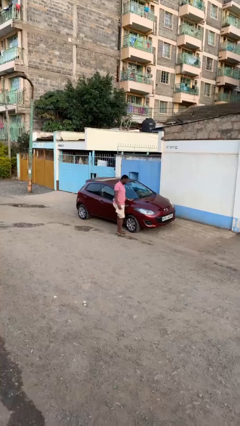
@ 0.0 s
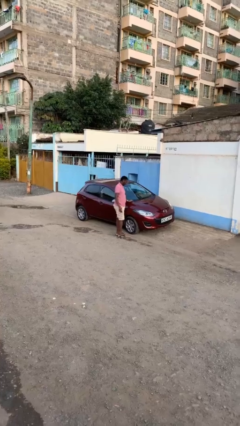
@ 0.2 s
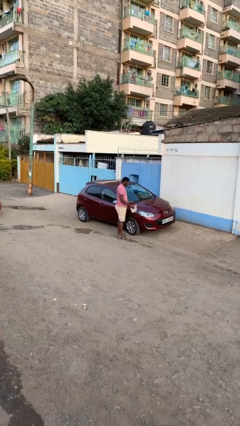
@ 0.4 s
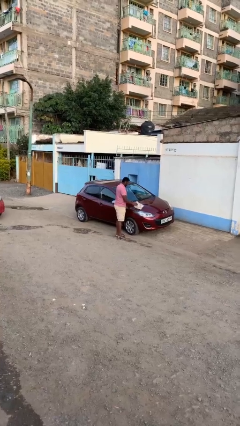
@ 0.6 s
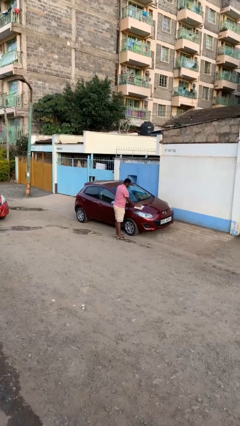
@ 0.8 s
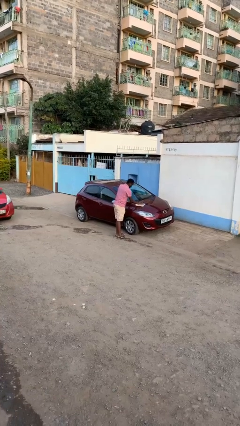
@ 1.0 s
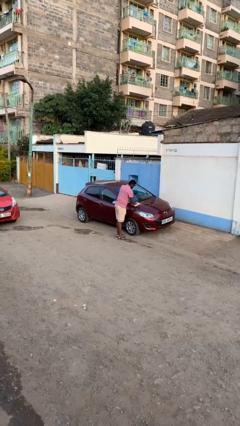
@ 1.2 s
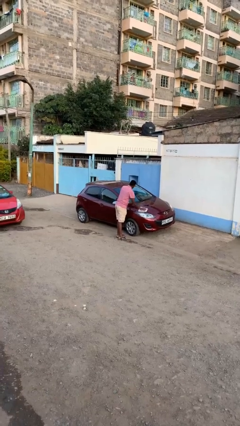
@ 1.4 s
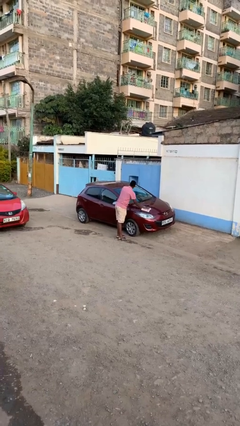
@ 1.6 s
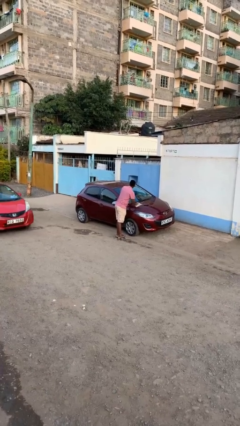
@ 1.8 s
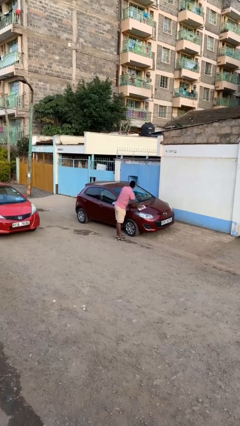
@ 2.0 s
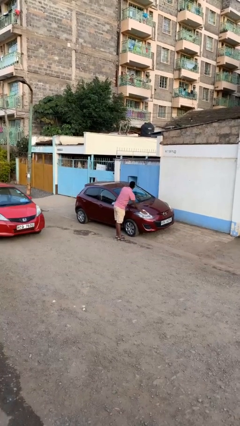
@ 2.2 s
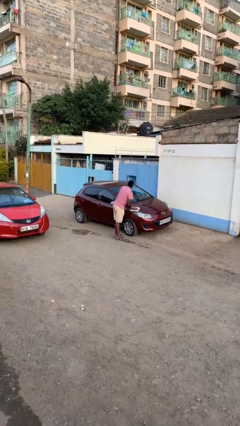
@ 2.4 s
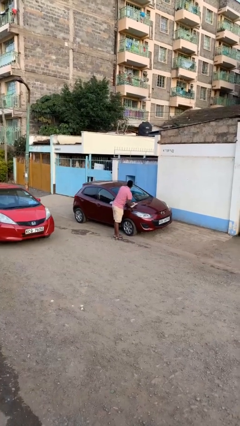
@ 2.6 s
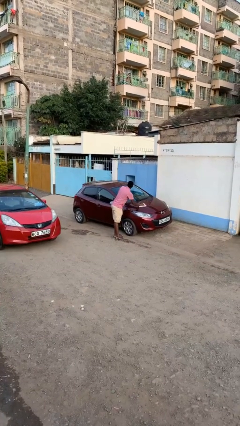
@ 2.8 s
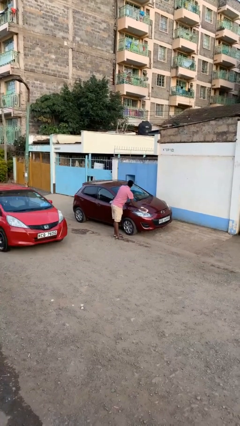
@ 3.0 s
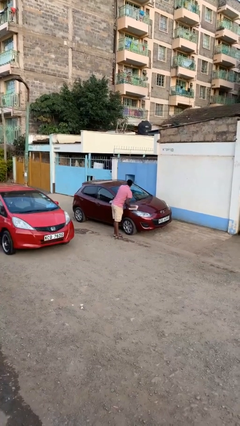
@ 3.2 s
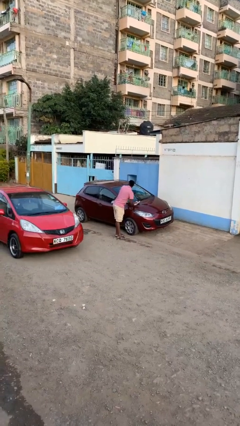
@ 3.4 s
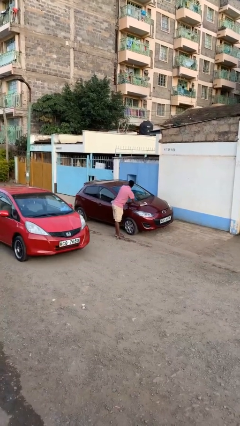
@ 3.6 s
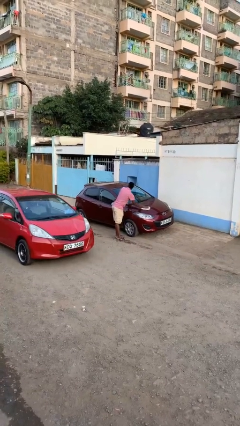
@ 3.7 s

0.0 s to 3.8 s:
person polishes car with rag

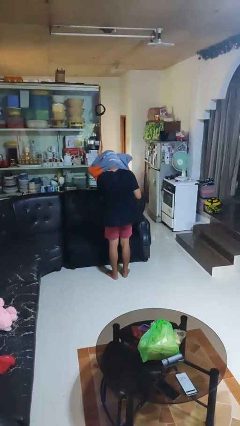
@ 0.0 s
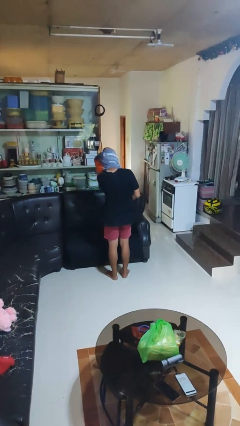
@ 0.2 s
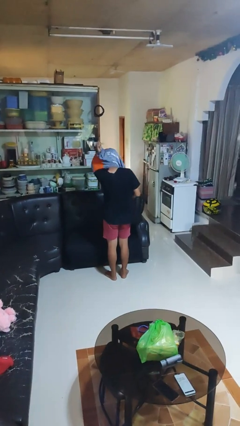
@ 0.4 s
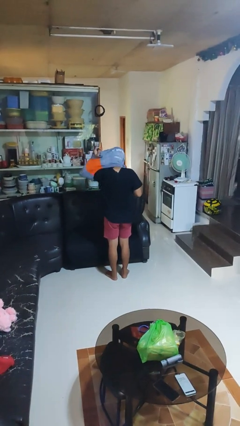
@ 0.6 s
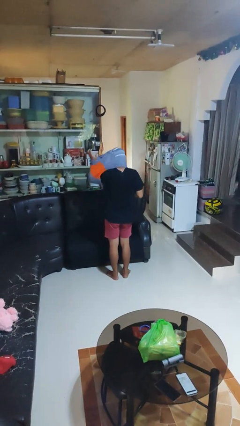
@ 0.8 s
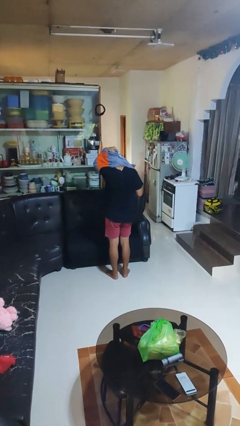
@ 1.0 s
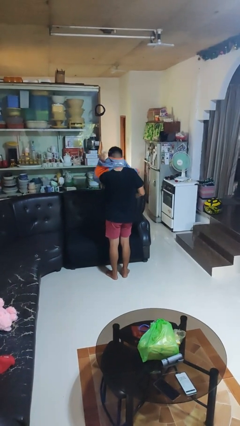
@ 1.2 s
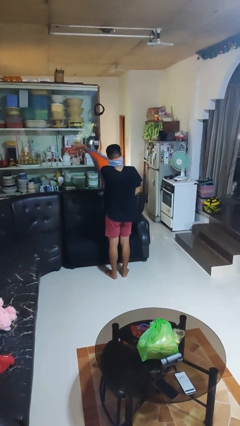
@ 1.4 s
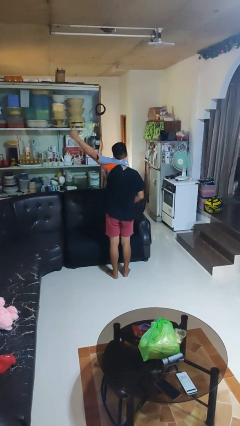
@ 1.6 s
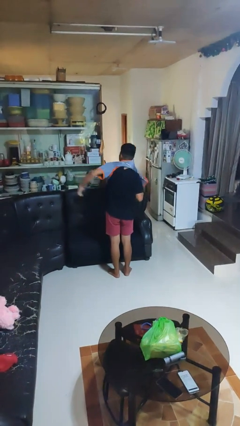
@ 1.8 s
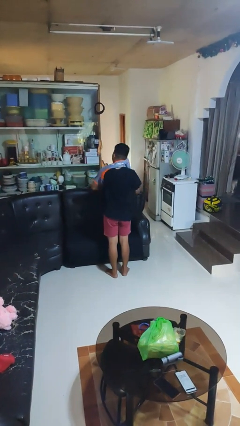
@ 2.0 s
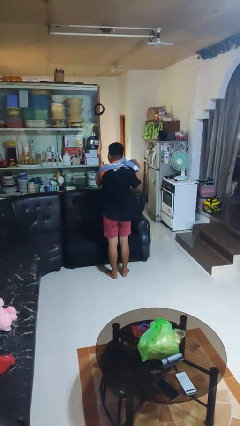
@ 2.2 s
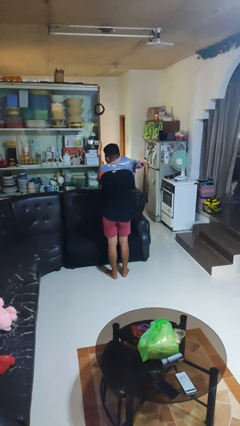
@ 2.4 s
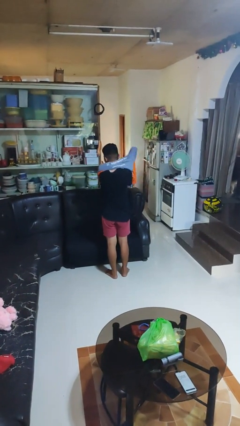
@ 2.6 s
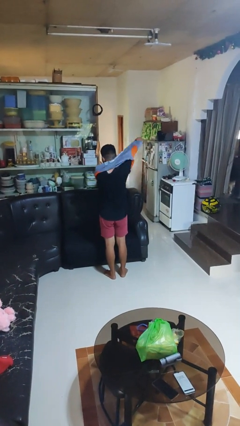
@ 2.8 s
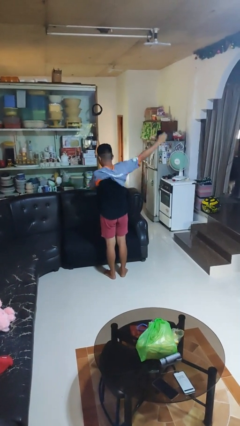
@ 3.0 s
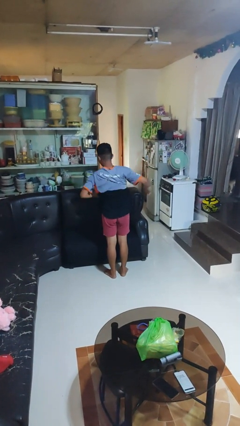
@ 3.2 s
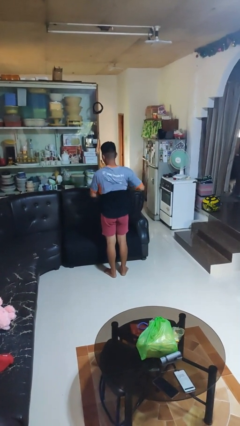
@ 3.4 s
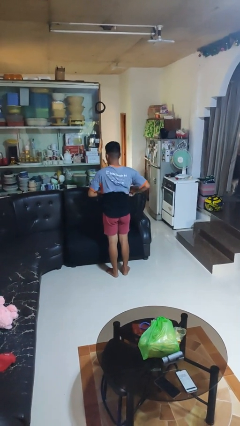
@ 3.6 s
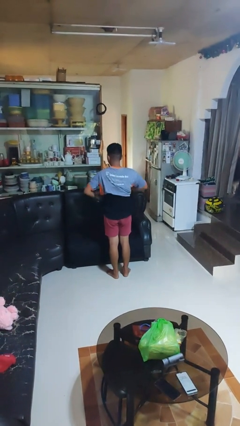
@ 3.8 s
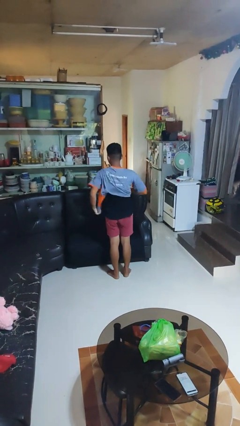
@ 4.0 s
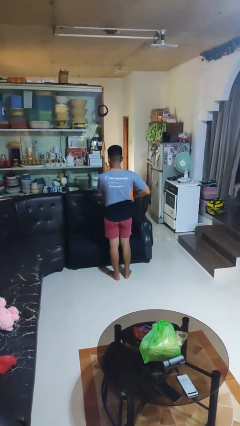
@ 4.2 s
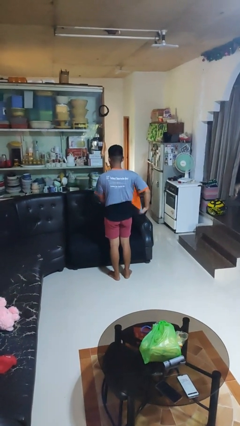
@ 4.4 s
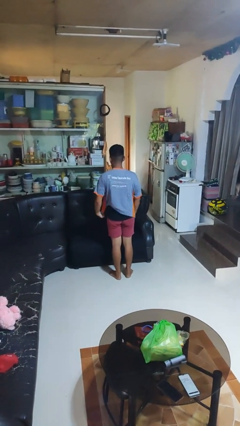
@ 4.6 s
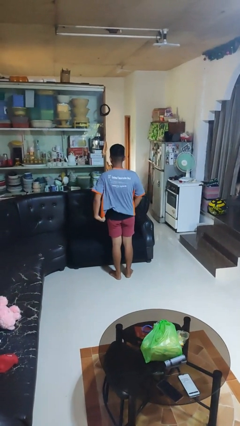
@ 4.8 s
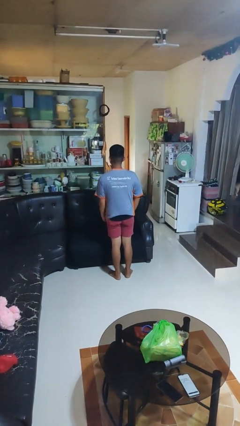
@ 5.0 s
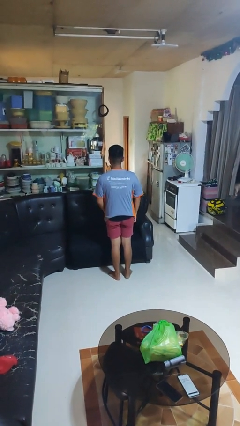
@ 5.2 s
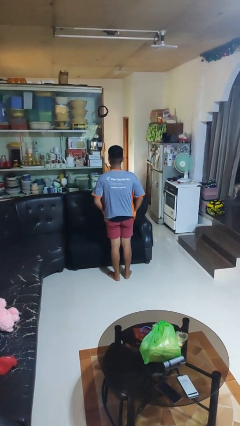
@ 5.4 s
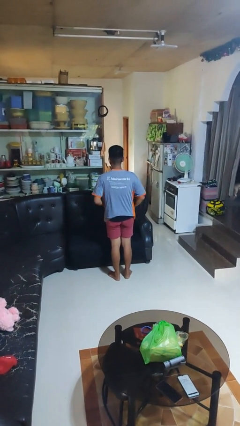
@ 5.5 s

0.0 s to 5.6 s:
person puts on shirt

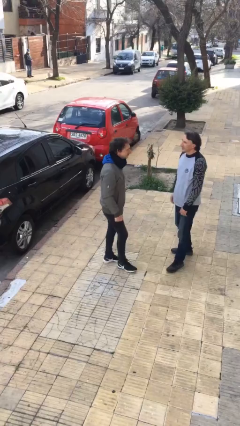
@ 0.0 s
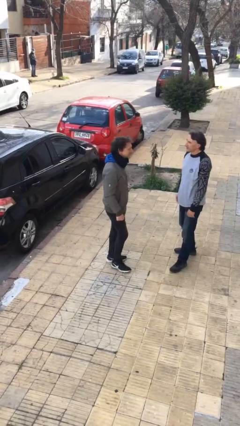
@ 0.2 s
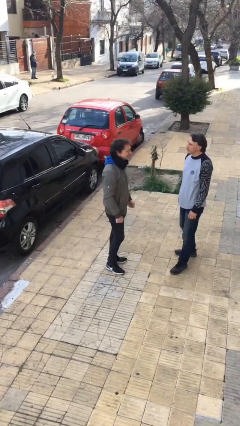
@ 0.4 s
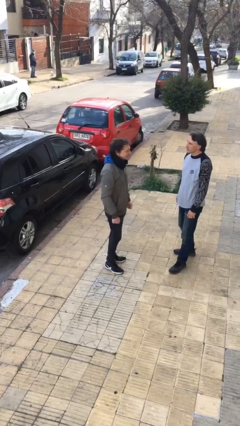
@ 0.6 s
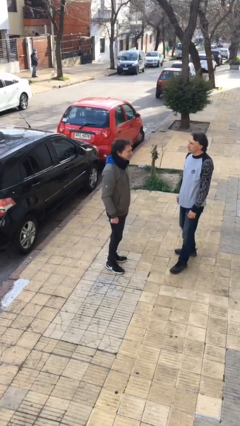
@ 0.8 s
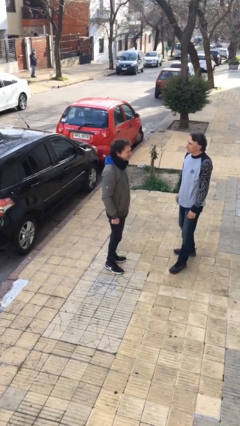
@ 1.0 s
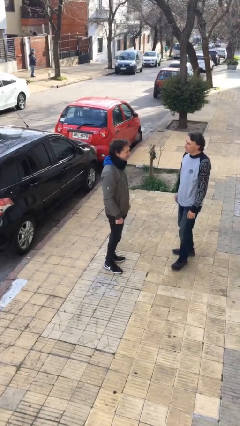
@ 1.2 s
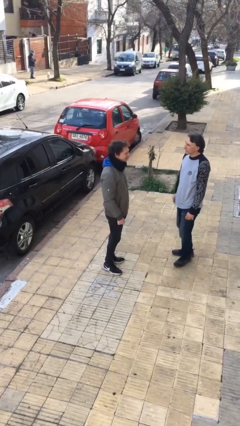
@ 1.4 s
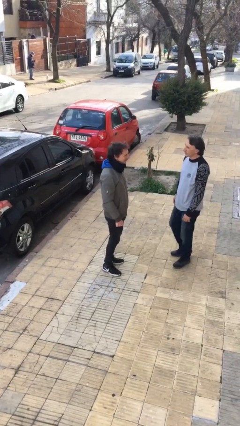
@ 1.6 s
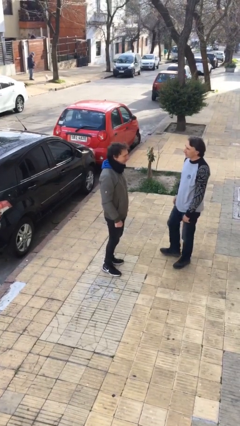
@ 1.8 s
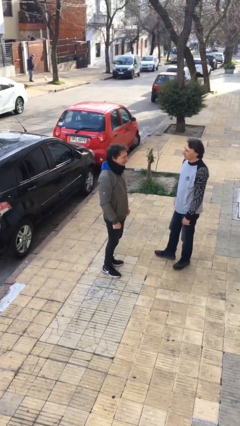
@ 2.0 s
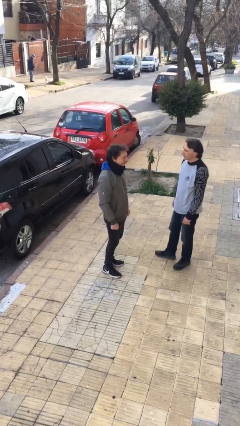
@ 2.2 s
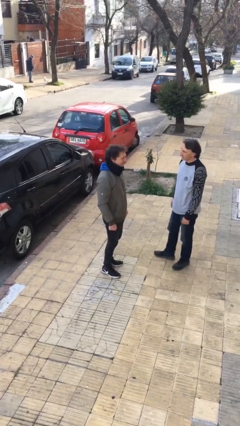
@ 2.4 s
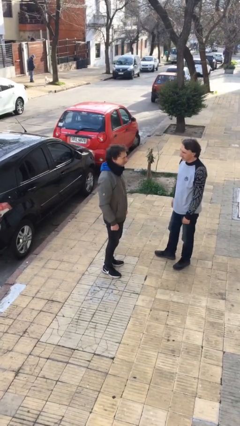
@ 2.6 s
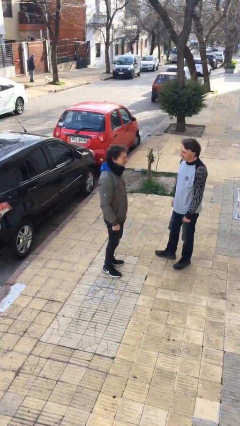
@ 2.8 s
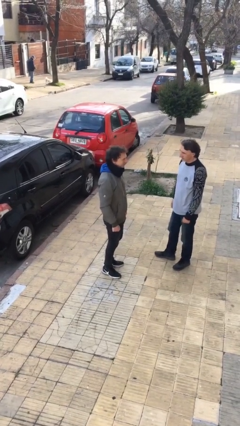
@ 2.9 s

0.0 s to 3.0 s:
person talks to person

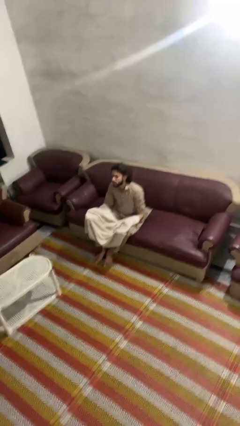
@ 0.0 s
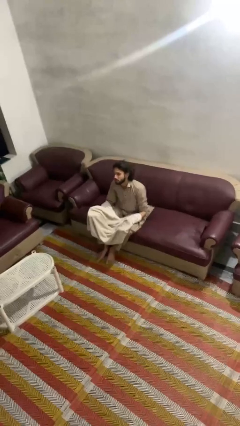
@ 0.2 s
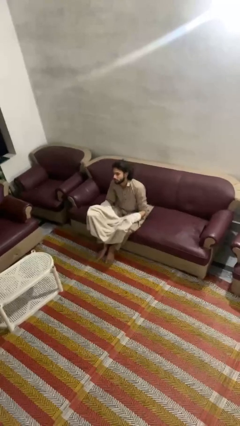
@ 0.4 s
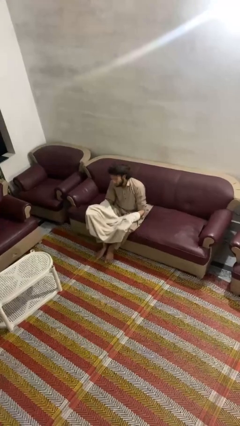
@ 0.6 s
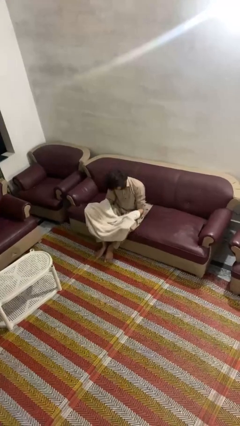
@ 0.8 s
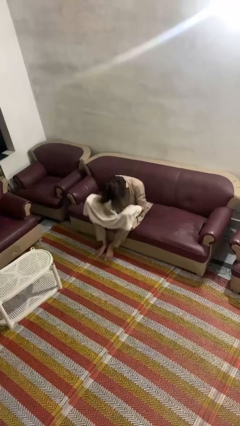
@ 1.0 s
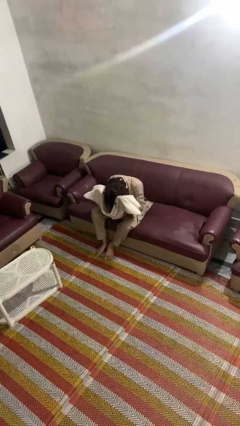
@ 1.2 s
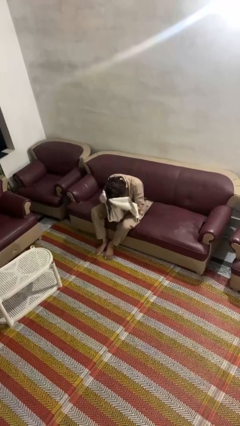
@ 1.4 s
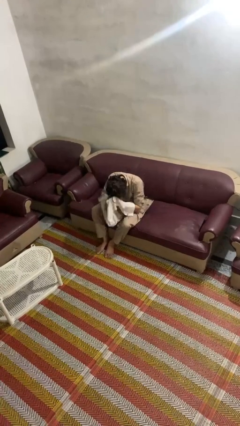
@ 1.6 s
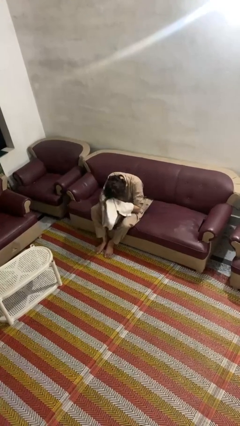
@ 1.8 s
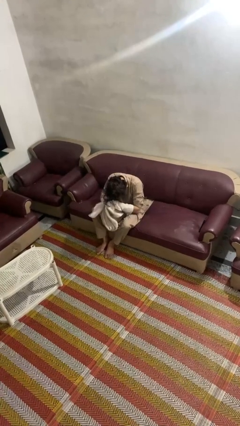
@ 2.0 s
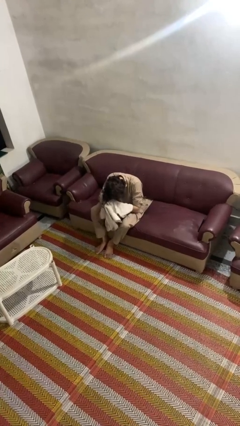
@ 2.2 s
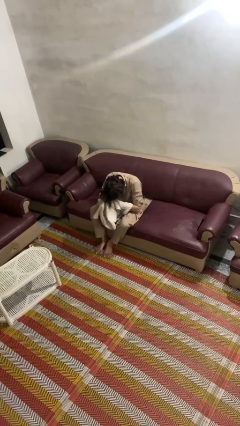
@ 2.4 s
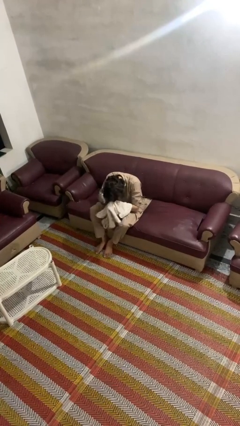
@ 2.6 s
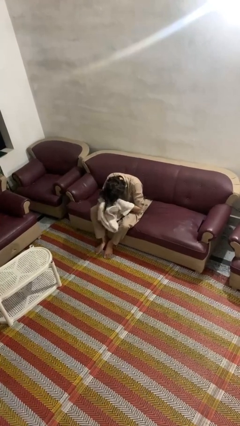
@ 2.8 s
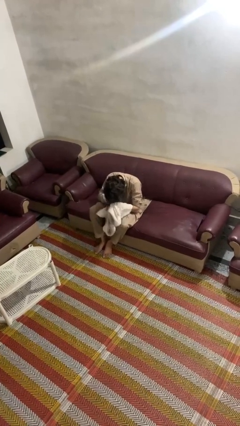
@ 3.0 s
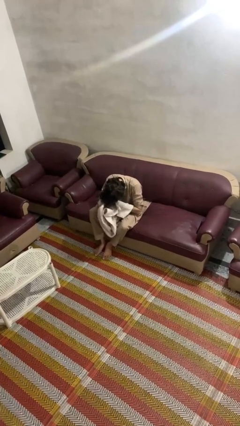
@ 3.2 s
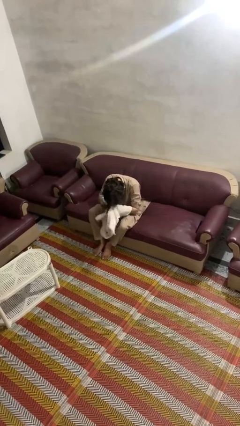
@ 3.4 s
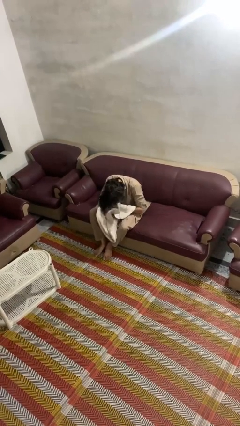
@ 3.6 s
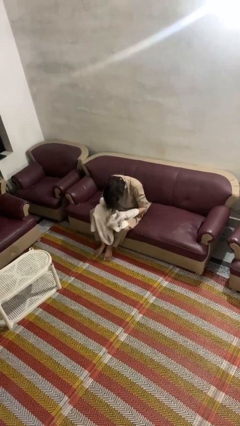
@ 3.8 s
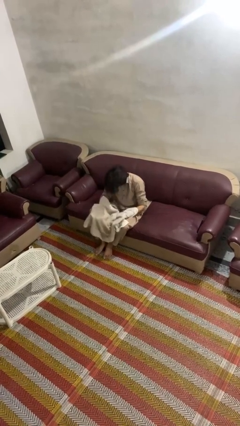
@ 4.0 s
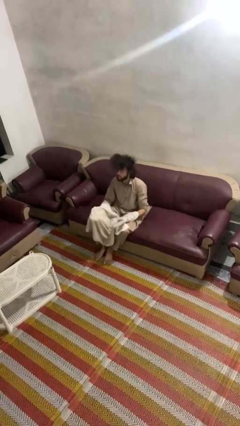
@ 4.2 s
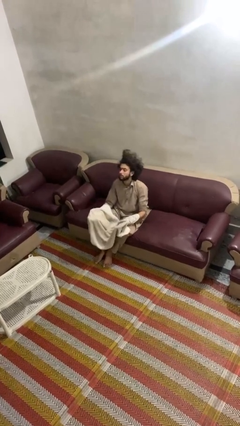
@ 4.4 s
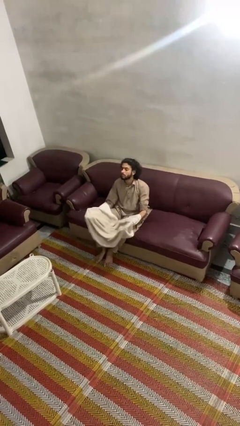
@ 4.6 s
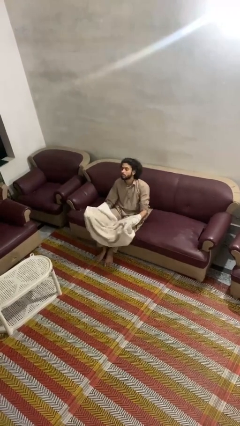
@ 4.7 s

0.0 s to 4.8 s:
person dries hair with towel

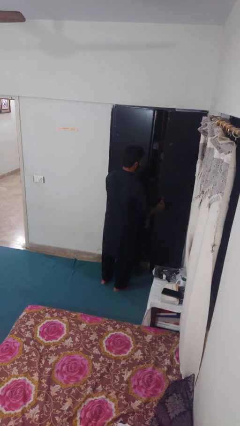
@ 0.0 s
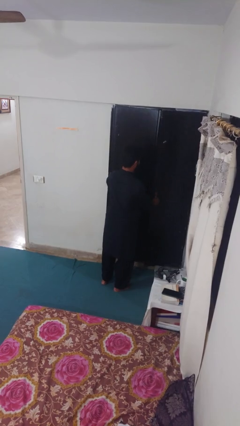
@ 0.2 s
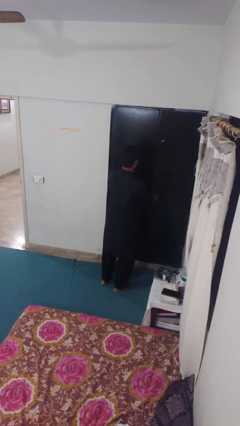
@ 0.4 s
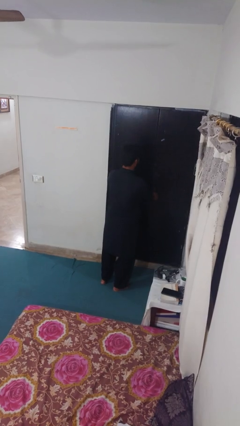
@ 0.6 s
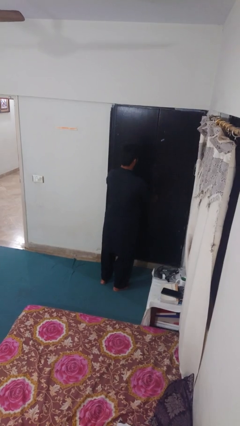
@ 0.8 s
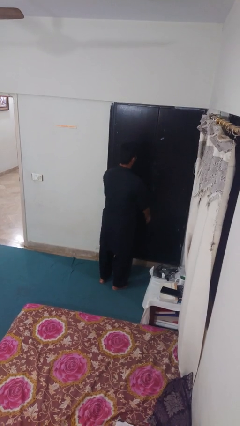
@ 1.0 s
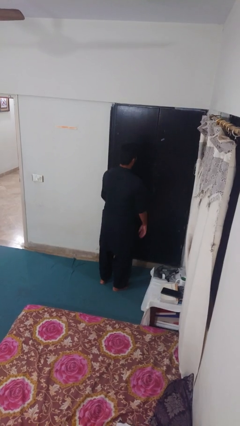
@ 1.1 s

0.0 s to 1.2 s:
person closes closet door
